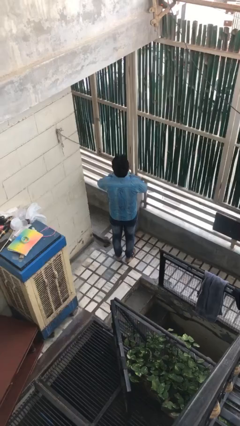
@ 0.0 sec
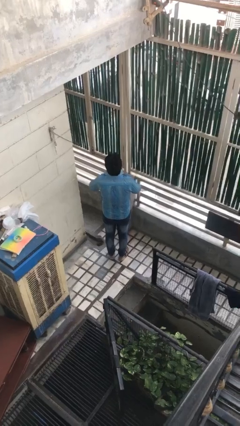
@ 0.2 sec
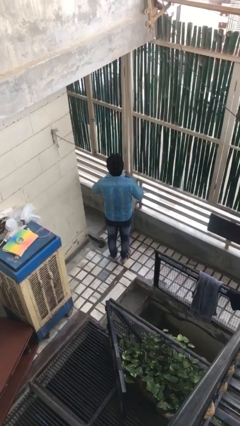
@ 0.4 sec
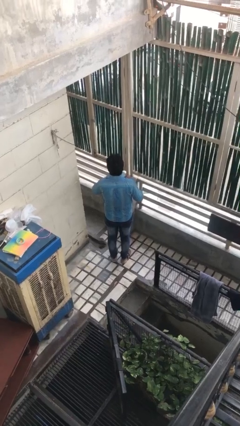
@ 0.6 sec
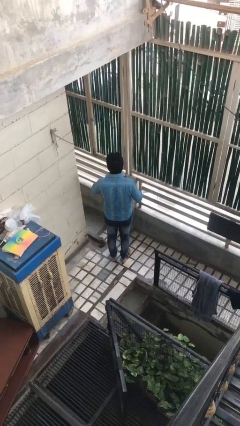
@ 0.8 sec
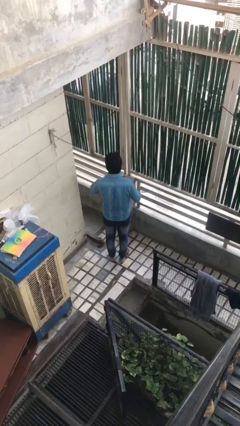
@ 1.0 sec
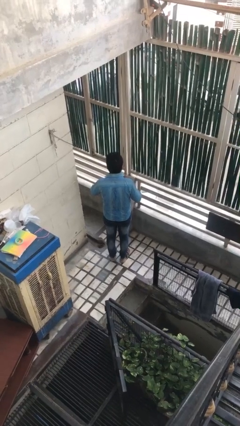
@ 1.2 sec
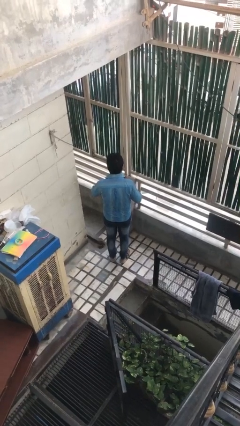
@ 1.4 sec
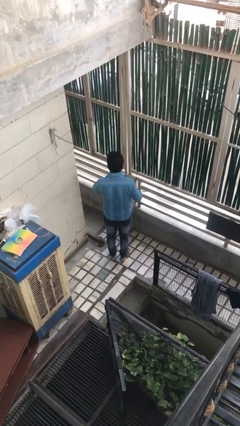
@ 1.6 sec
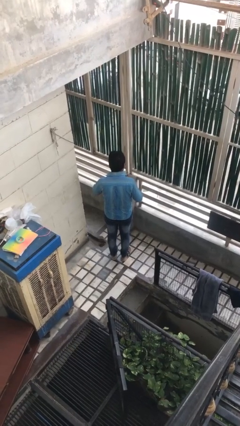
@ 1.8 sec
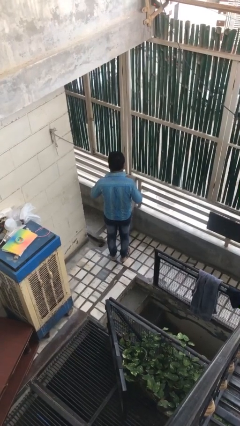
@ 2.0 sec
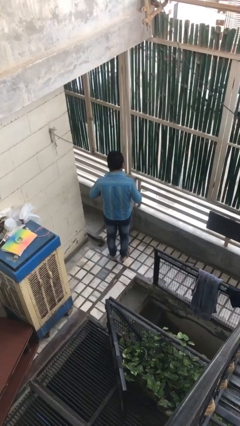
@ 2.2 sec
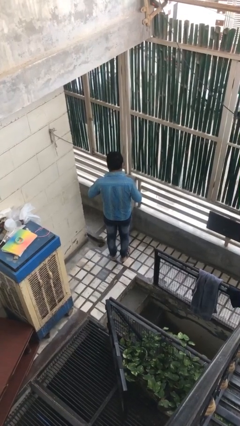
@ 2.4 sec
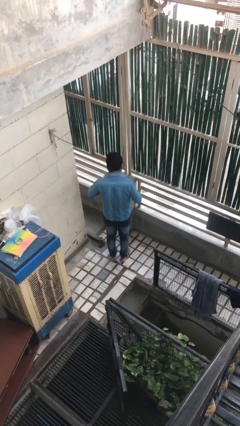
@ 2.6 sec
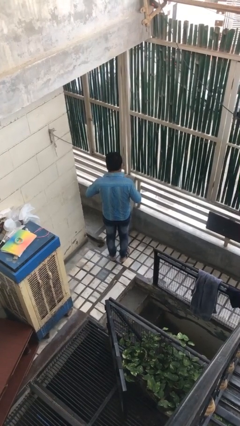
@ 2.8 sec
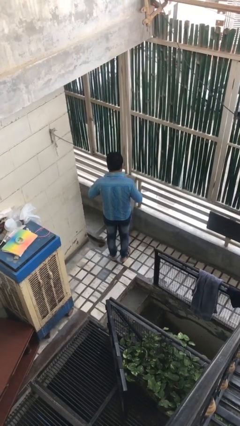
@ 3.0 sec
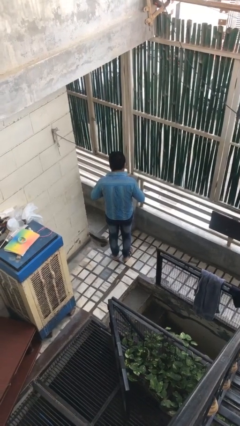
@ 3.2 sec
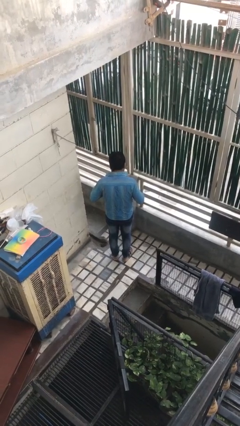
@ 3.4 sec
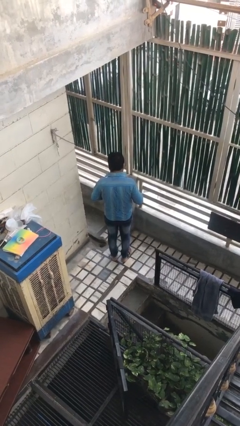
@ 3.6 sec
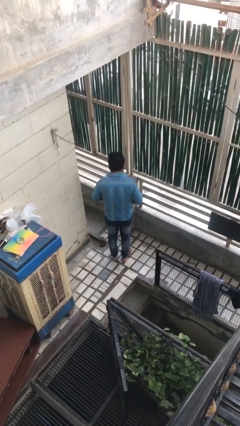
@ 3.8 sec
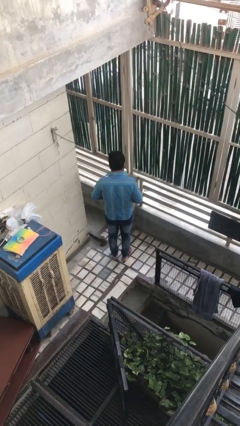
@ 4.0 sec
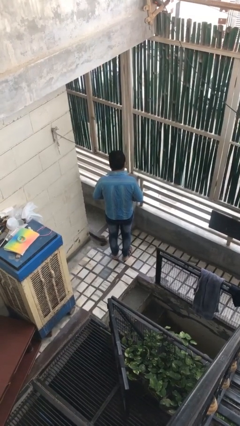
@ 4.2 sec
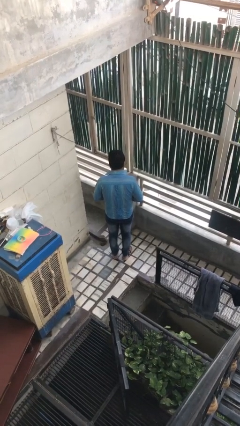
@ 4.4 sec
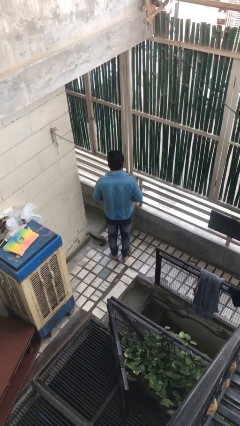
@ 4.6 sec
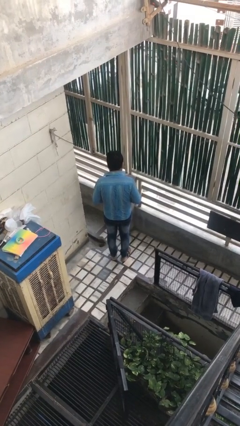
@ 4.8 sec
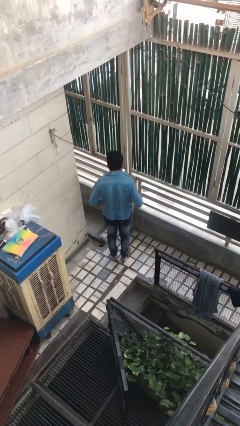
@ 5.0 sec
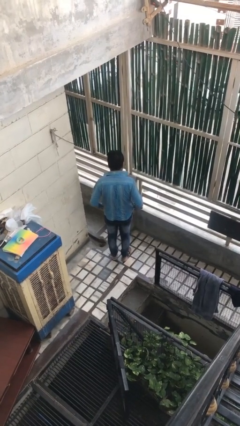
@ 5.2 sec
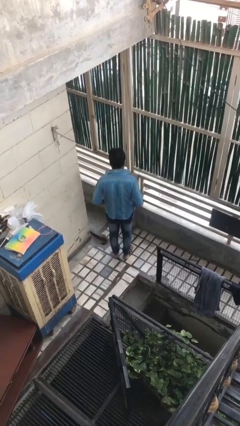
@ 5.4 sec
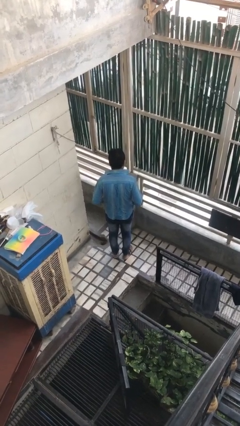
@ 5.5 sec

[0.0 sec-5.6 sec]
person unbuttons shirt

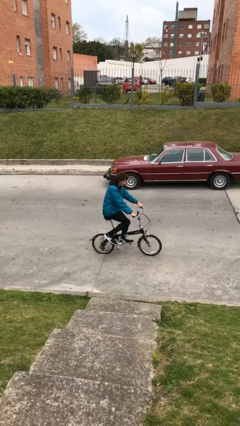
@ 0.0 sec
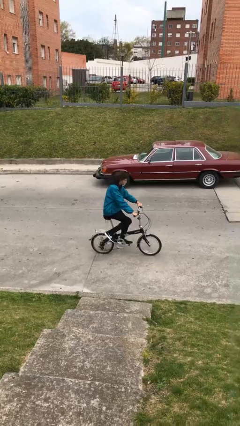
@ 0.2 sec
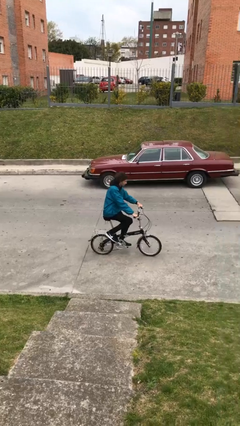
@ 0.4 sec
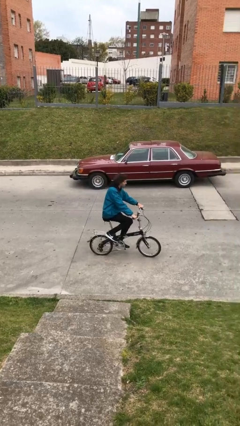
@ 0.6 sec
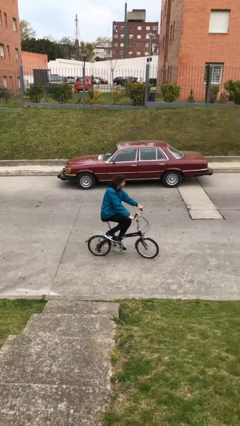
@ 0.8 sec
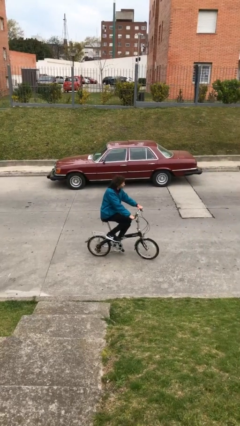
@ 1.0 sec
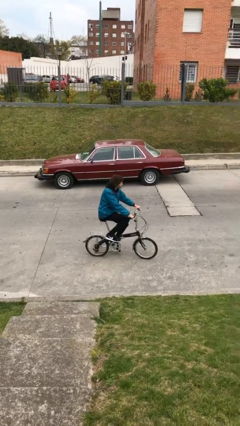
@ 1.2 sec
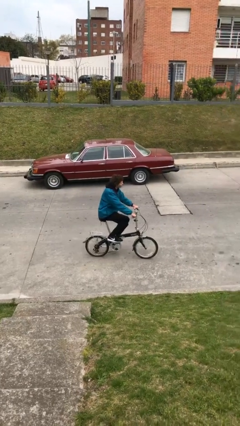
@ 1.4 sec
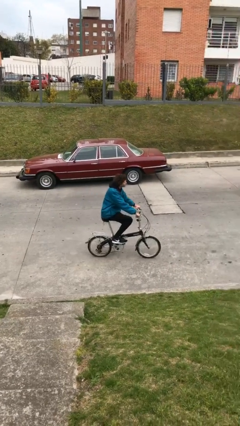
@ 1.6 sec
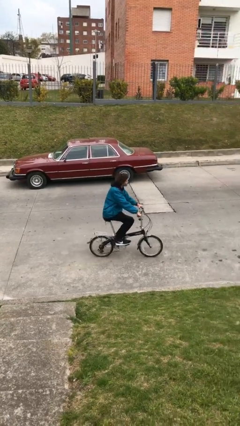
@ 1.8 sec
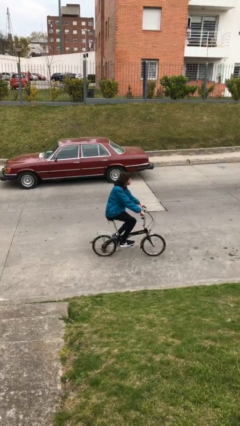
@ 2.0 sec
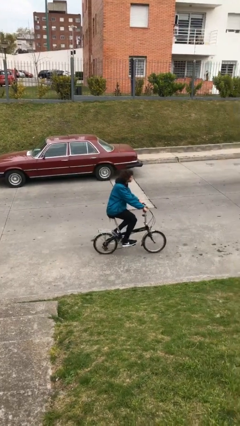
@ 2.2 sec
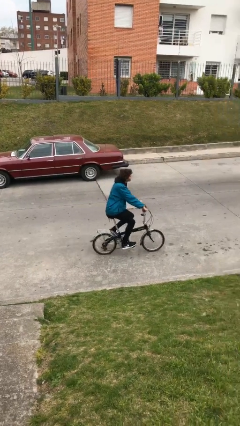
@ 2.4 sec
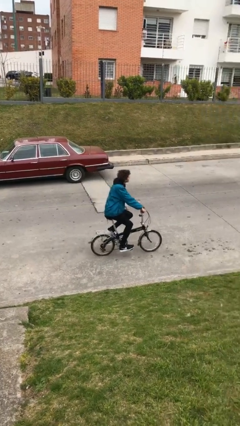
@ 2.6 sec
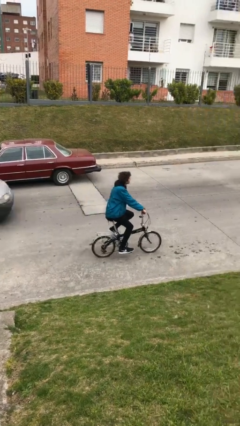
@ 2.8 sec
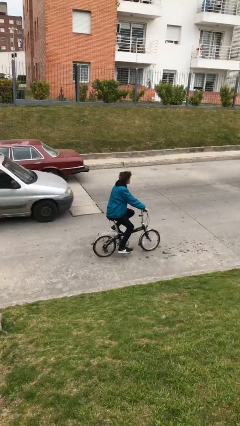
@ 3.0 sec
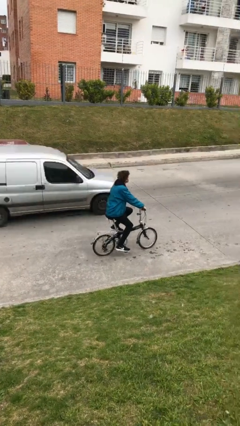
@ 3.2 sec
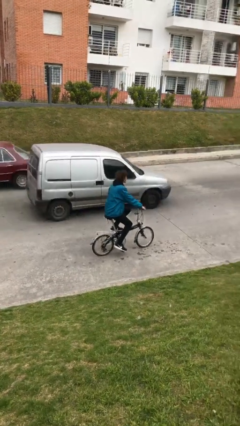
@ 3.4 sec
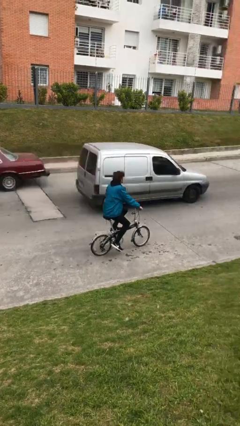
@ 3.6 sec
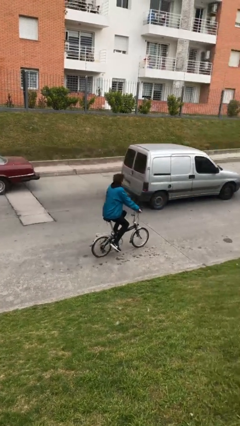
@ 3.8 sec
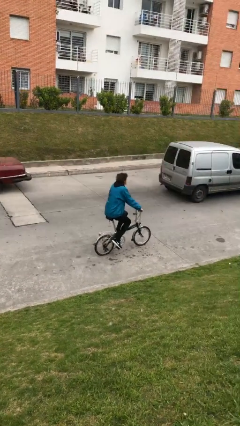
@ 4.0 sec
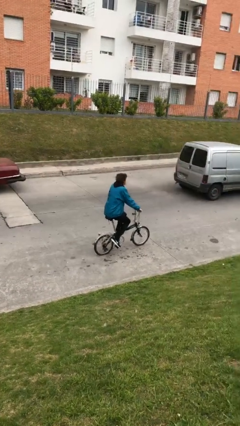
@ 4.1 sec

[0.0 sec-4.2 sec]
person rides bicycle

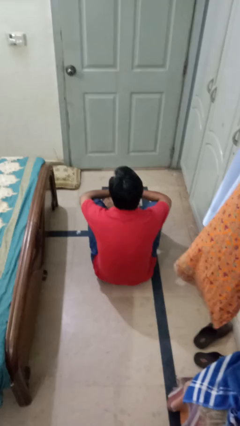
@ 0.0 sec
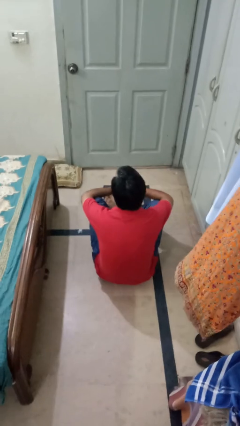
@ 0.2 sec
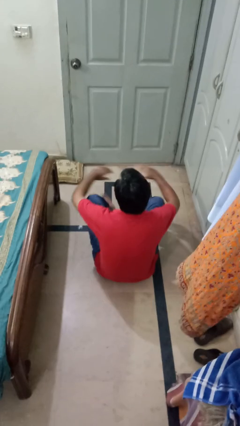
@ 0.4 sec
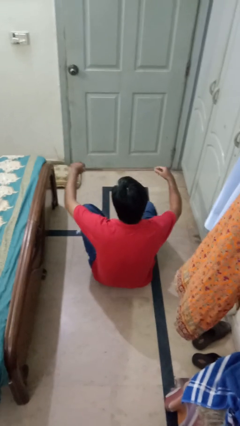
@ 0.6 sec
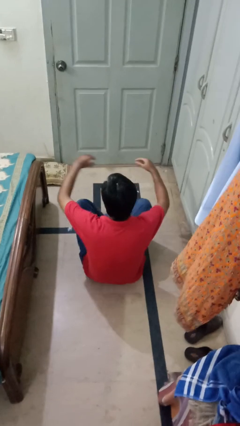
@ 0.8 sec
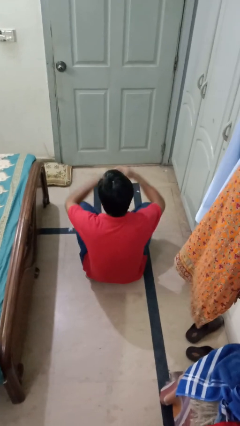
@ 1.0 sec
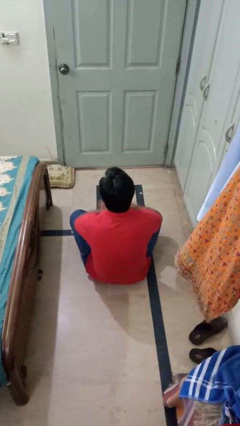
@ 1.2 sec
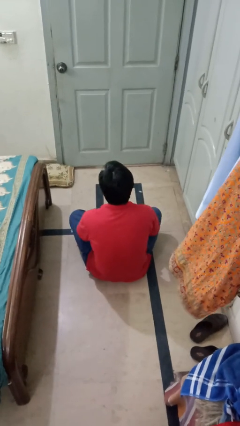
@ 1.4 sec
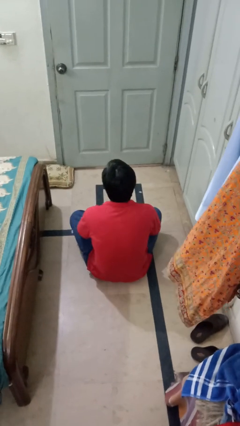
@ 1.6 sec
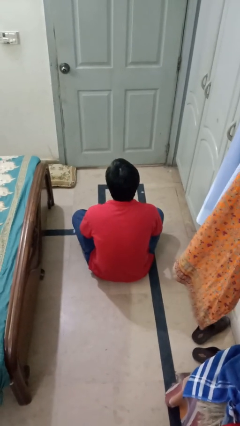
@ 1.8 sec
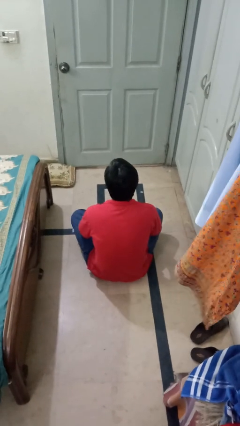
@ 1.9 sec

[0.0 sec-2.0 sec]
person crosses legs

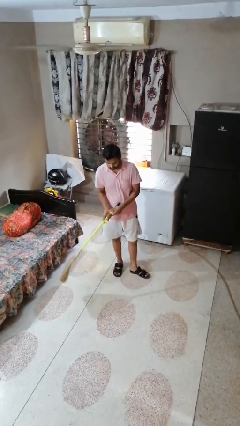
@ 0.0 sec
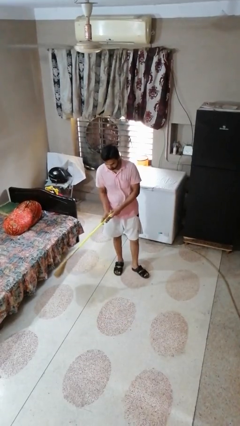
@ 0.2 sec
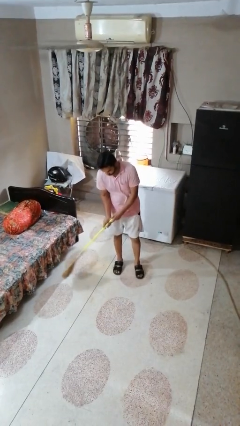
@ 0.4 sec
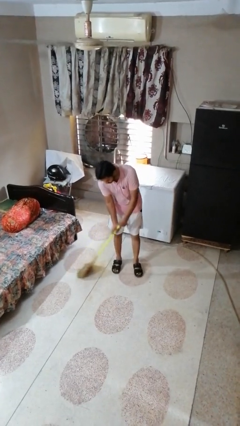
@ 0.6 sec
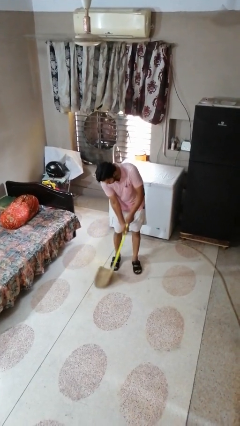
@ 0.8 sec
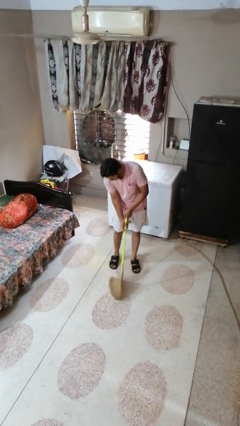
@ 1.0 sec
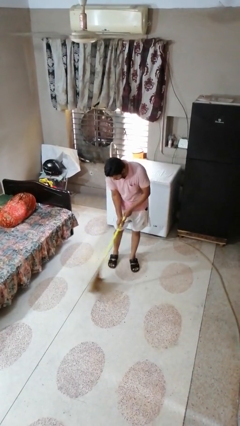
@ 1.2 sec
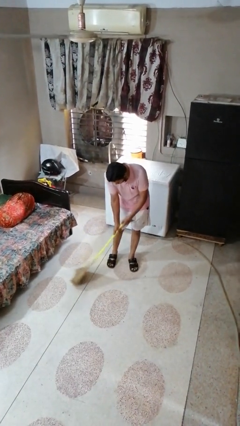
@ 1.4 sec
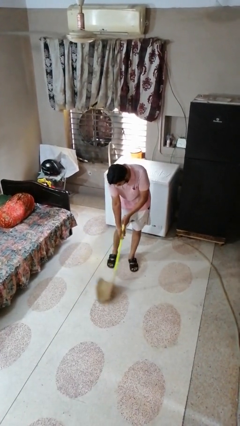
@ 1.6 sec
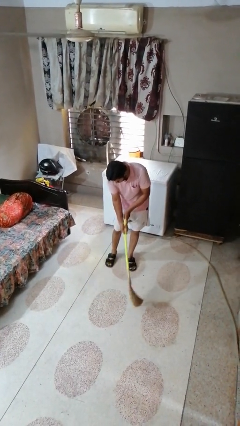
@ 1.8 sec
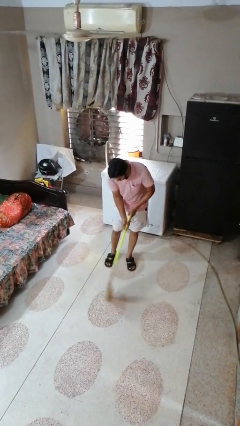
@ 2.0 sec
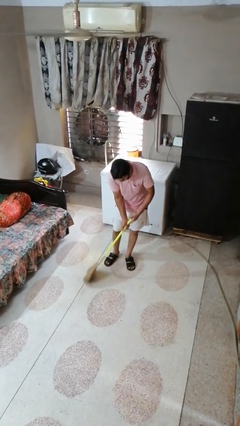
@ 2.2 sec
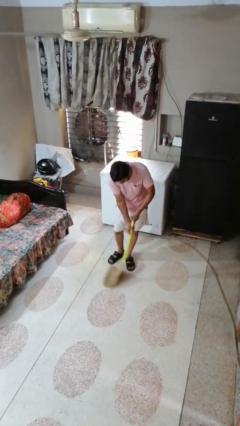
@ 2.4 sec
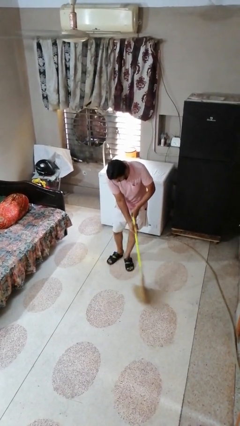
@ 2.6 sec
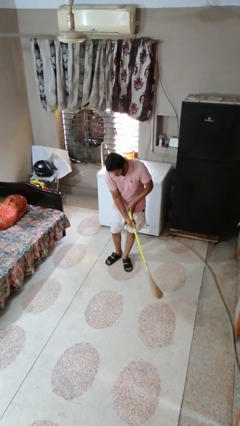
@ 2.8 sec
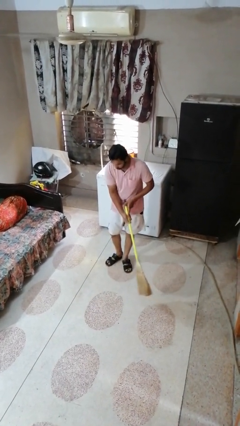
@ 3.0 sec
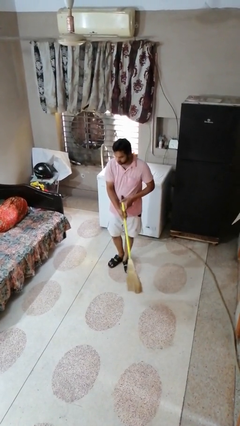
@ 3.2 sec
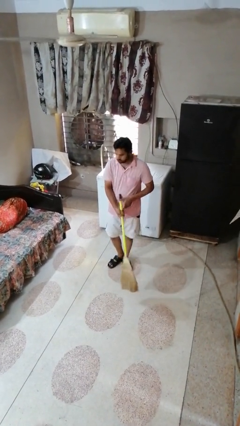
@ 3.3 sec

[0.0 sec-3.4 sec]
person sweeps floor

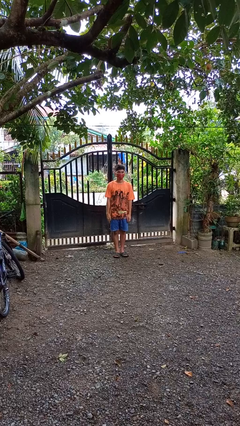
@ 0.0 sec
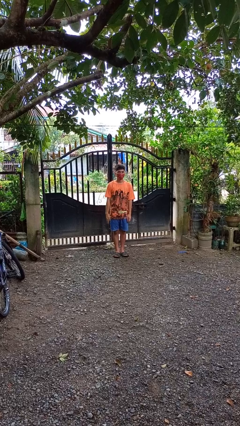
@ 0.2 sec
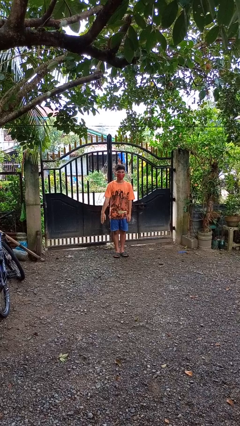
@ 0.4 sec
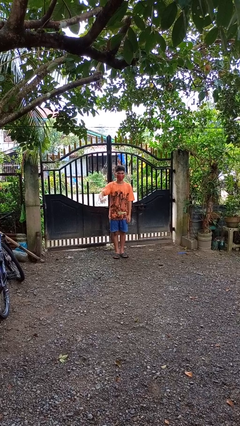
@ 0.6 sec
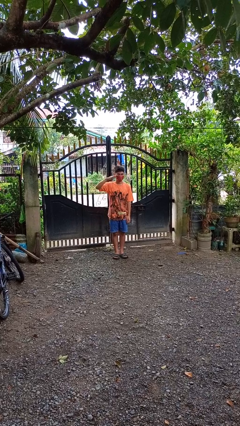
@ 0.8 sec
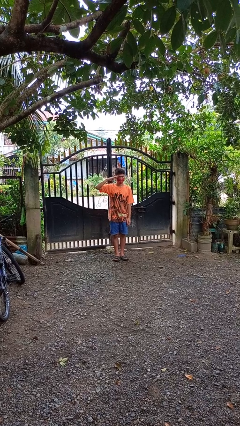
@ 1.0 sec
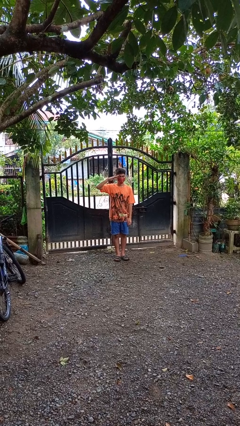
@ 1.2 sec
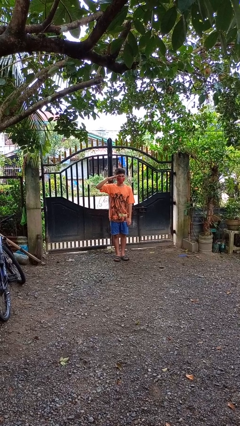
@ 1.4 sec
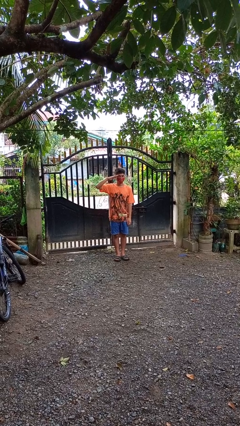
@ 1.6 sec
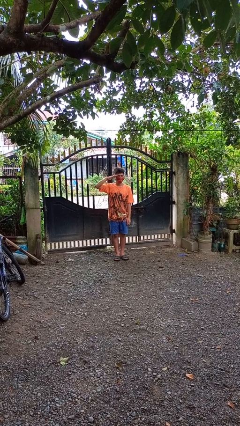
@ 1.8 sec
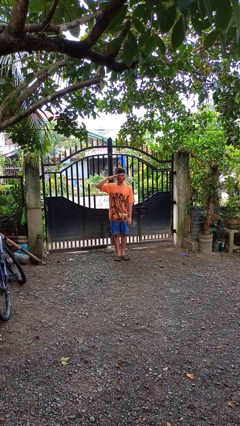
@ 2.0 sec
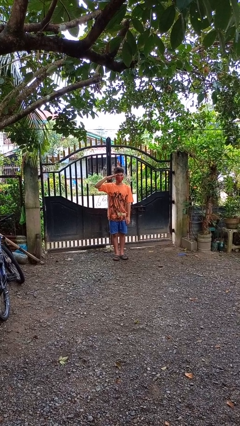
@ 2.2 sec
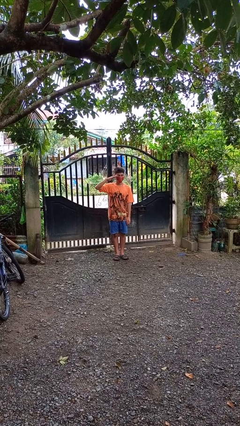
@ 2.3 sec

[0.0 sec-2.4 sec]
person salutes
